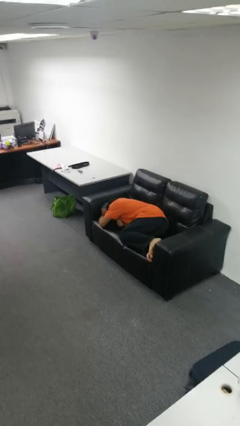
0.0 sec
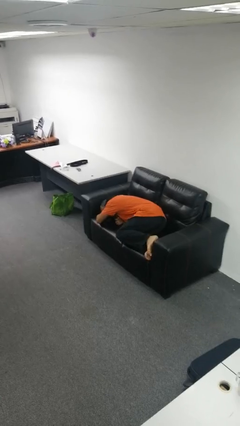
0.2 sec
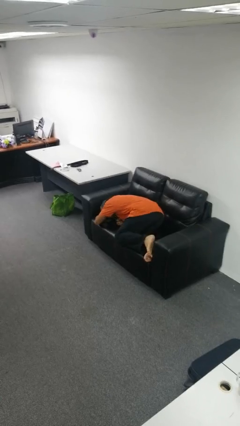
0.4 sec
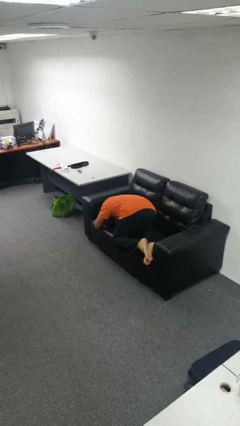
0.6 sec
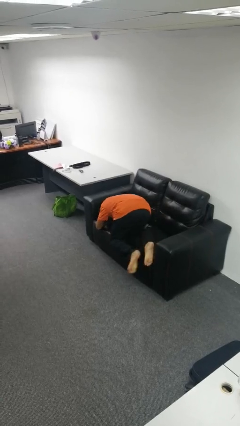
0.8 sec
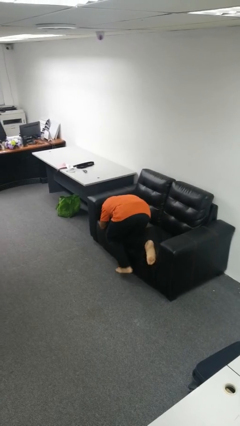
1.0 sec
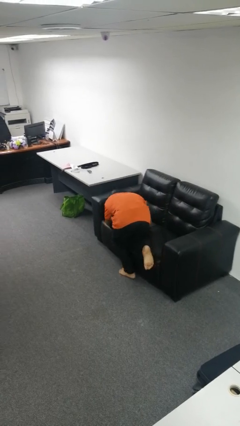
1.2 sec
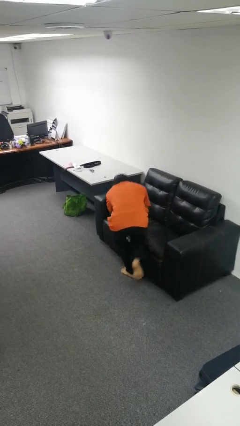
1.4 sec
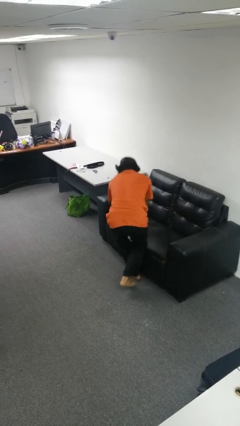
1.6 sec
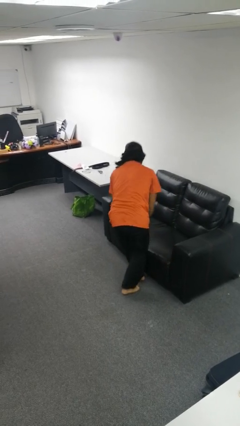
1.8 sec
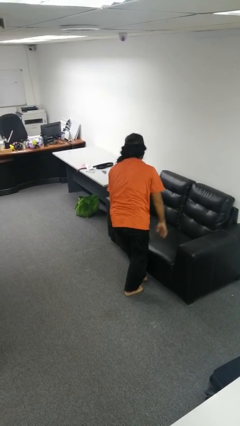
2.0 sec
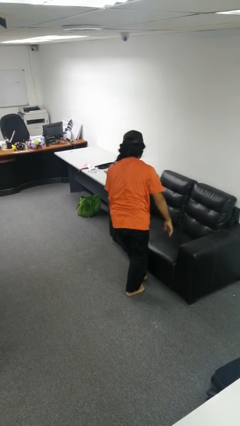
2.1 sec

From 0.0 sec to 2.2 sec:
person stands up

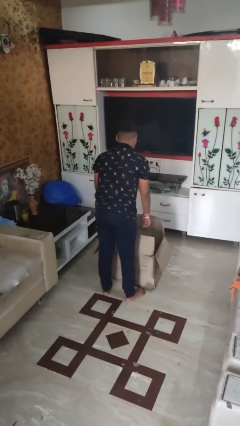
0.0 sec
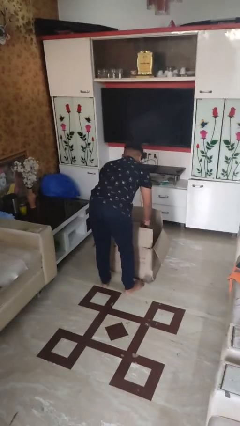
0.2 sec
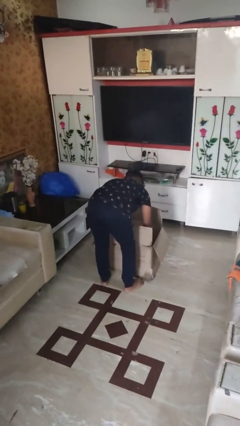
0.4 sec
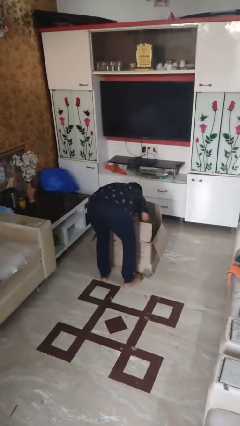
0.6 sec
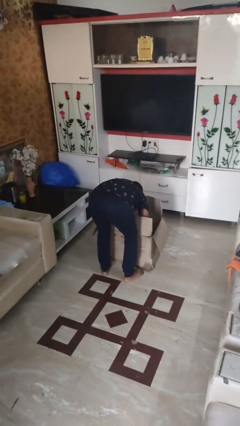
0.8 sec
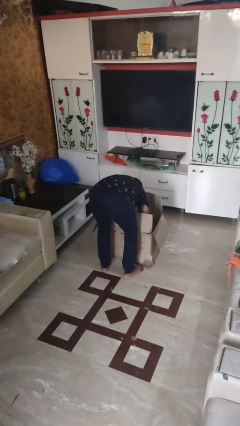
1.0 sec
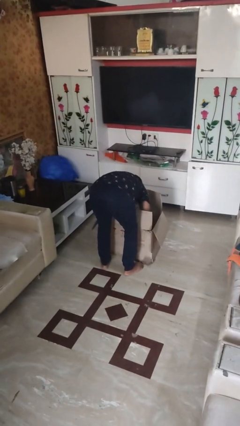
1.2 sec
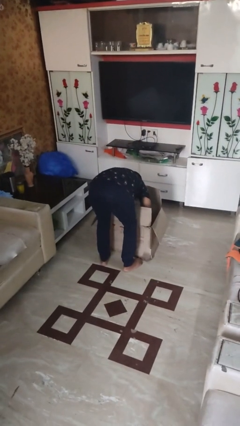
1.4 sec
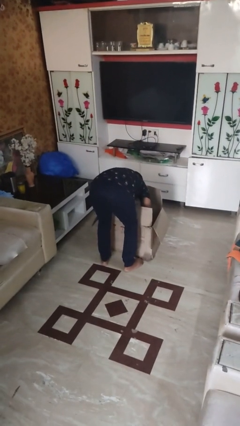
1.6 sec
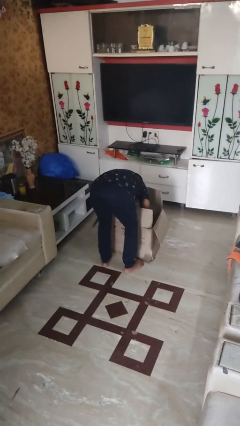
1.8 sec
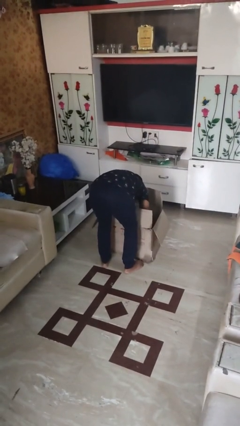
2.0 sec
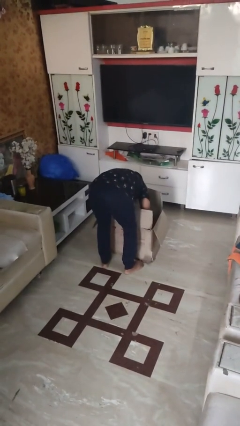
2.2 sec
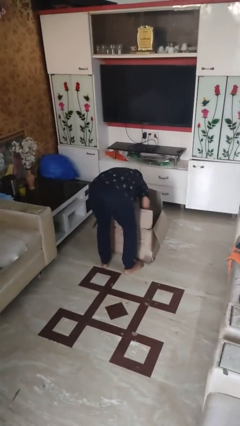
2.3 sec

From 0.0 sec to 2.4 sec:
person searches in box

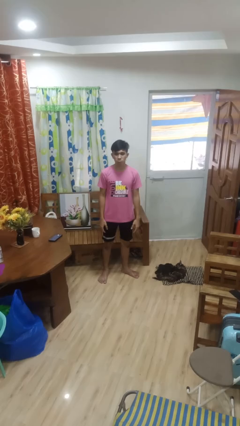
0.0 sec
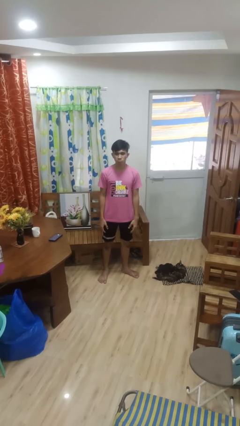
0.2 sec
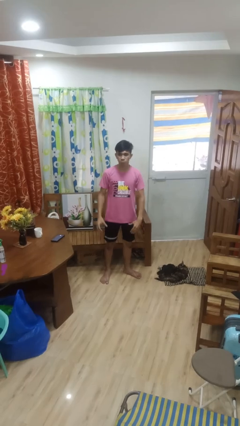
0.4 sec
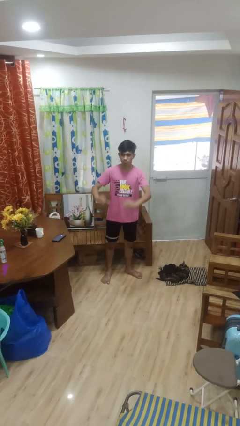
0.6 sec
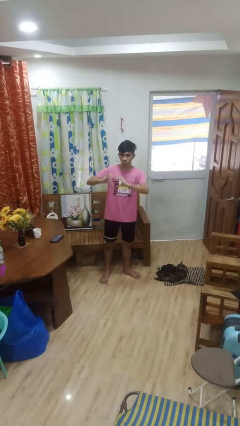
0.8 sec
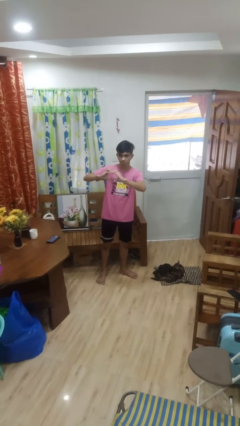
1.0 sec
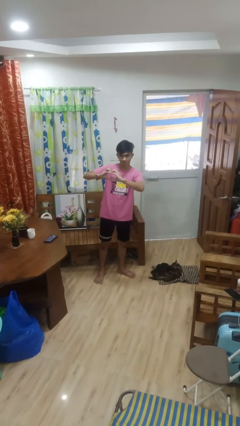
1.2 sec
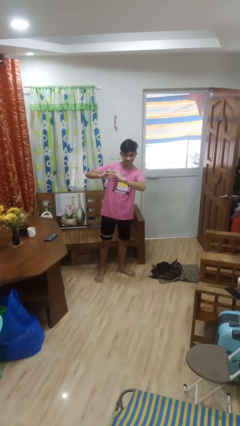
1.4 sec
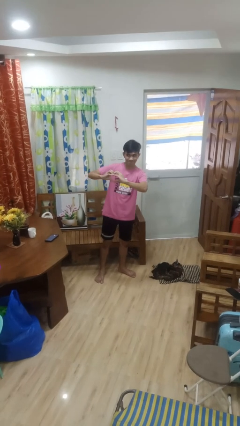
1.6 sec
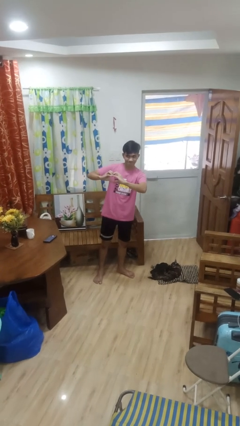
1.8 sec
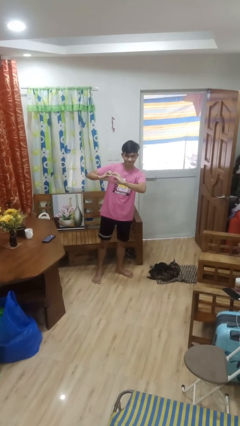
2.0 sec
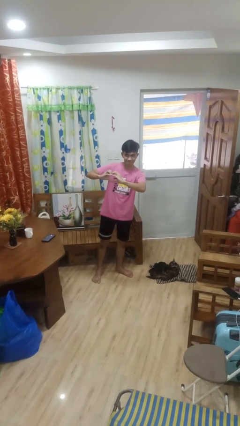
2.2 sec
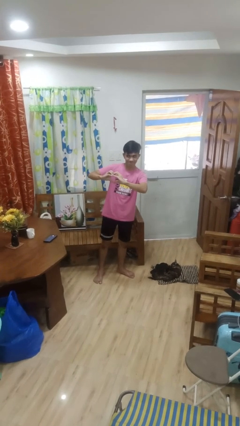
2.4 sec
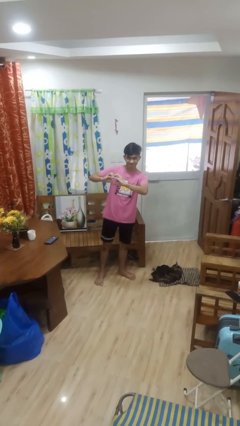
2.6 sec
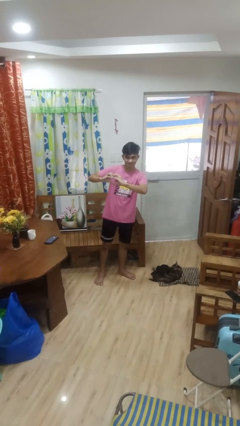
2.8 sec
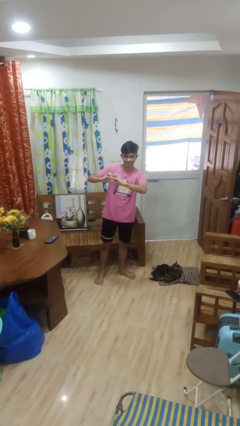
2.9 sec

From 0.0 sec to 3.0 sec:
person gestures heart

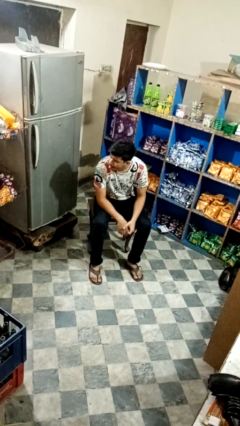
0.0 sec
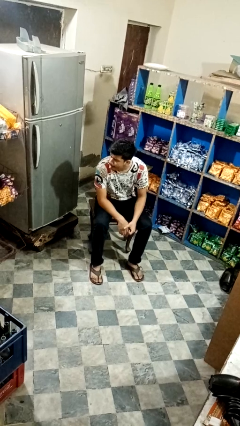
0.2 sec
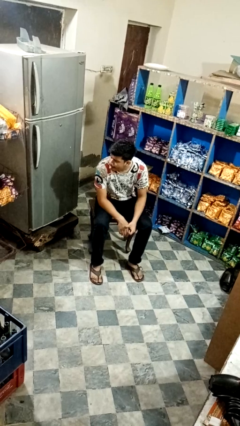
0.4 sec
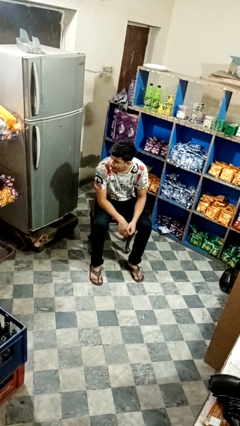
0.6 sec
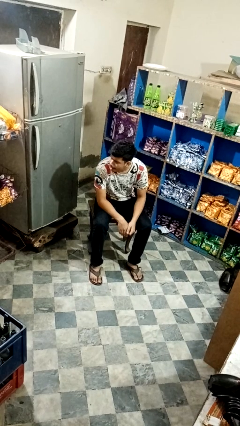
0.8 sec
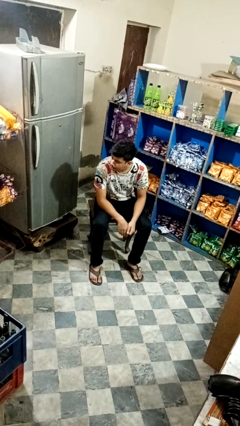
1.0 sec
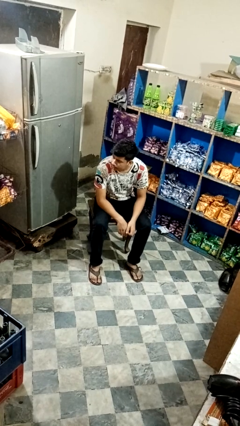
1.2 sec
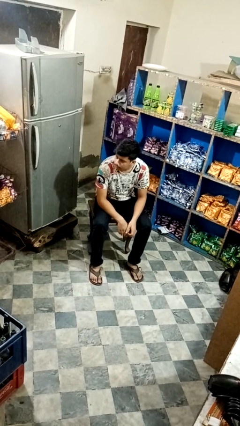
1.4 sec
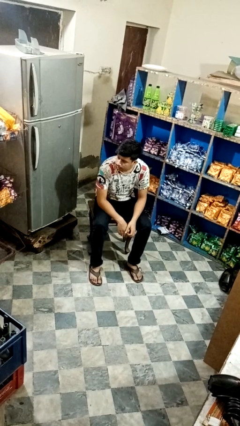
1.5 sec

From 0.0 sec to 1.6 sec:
person sticks out tongue

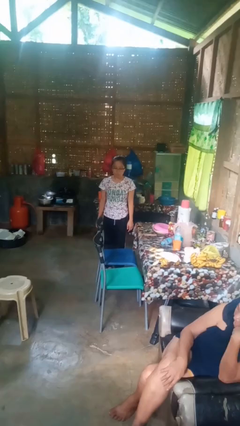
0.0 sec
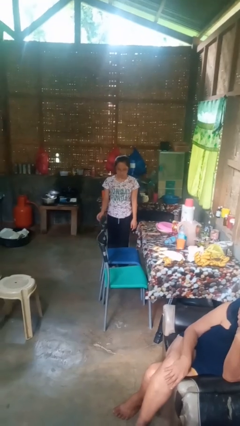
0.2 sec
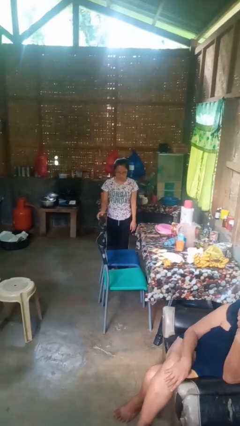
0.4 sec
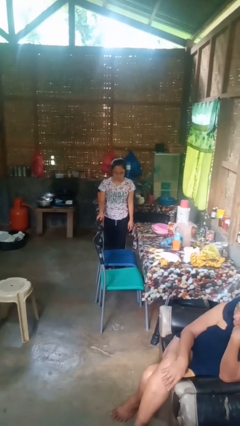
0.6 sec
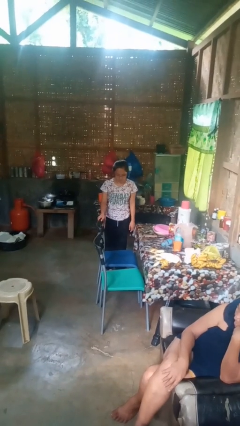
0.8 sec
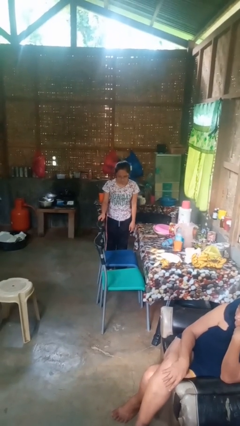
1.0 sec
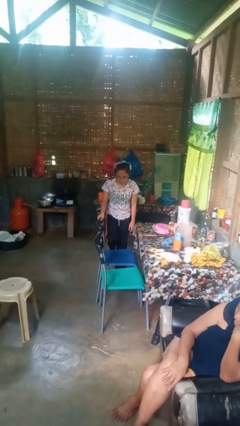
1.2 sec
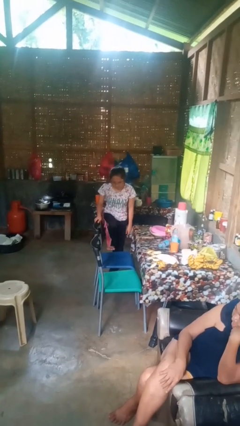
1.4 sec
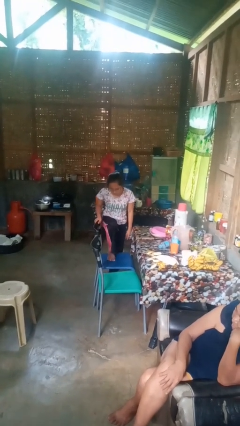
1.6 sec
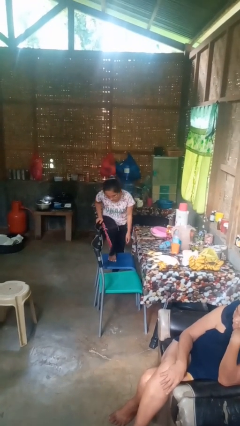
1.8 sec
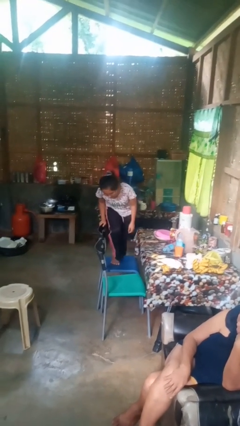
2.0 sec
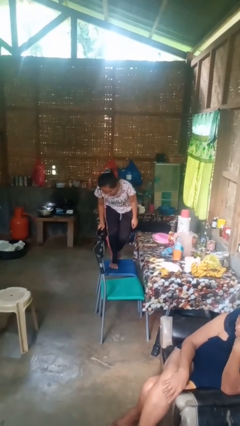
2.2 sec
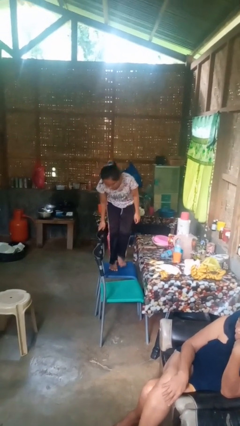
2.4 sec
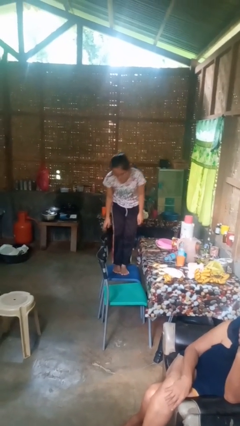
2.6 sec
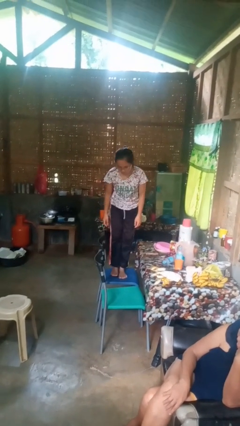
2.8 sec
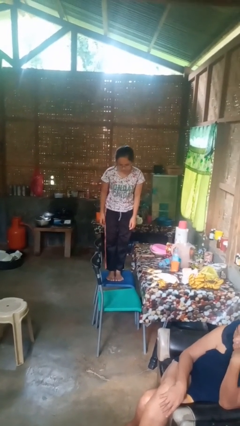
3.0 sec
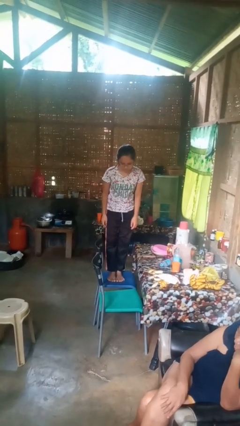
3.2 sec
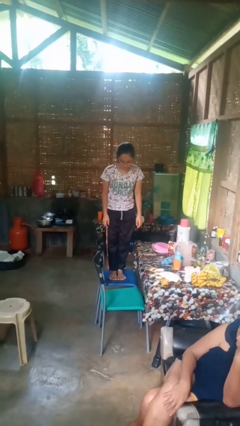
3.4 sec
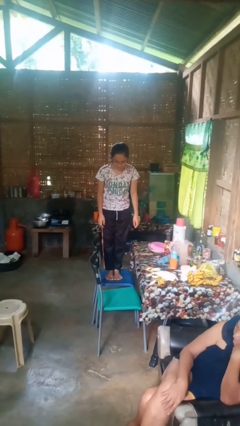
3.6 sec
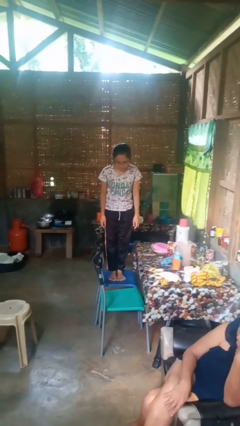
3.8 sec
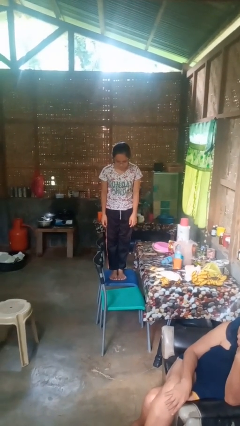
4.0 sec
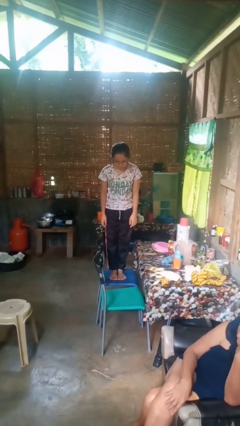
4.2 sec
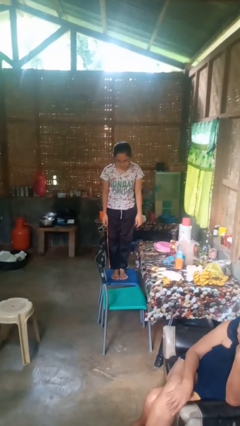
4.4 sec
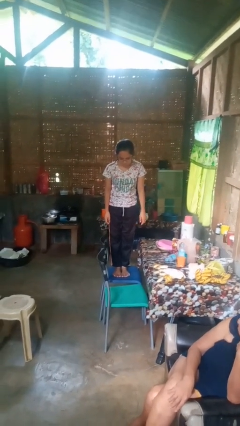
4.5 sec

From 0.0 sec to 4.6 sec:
person climbs on chair

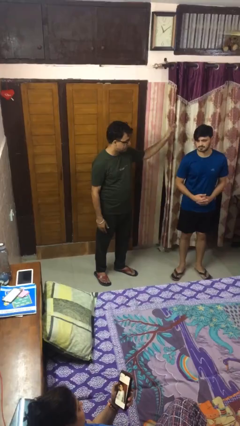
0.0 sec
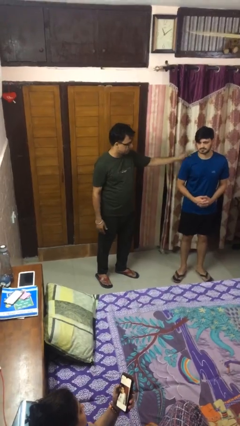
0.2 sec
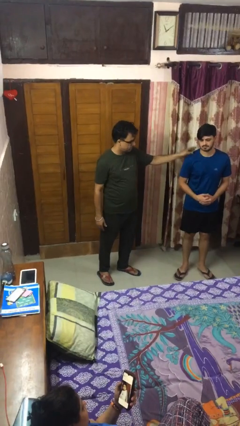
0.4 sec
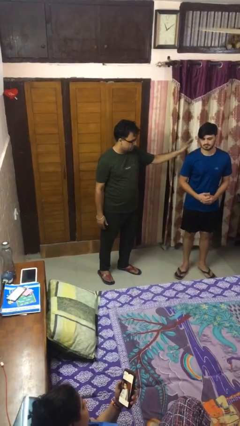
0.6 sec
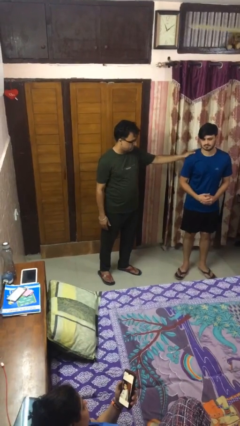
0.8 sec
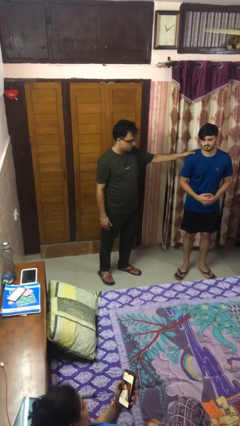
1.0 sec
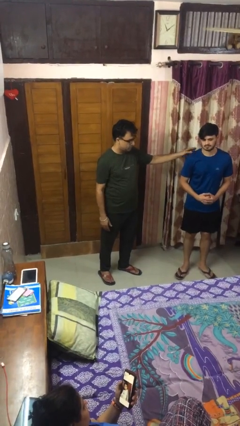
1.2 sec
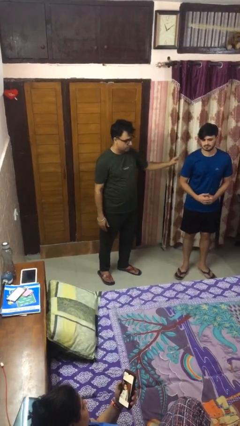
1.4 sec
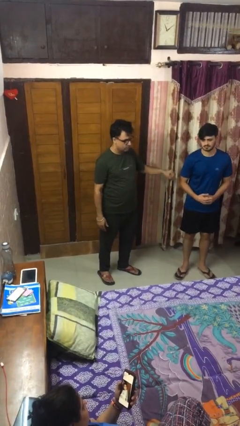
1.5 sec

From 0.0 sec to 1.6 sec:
person pounds shoulders of person

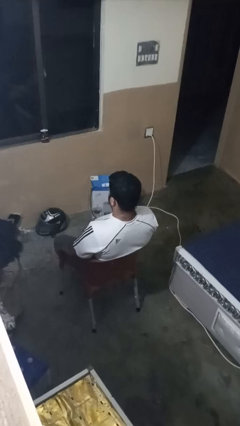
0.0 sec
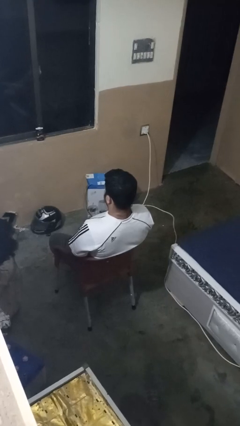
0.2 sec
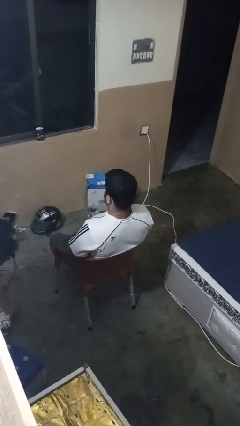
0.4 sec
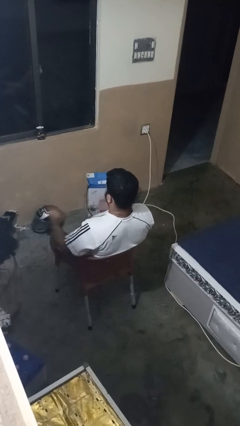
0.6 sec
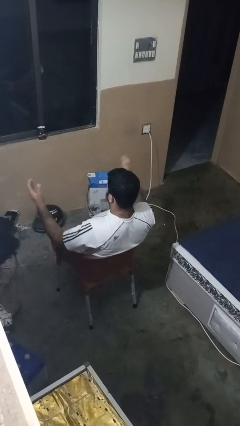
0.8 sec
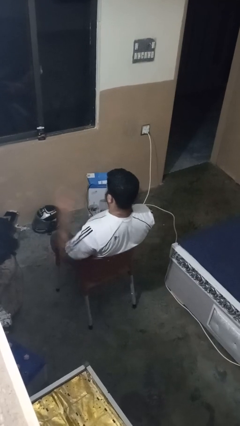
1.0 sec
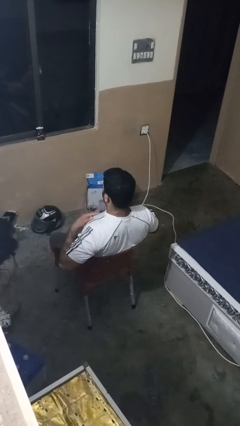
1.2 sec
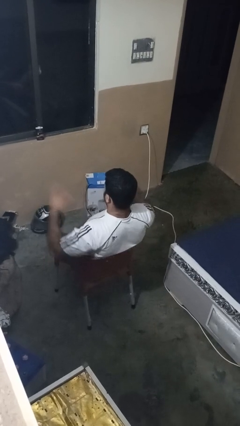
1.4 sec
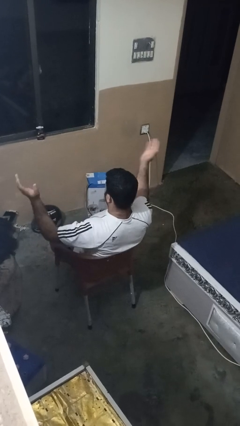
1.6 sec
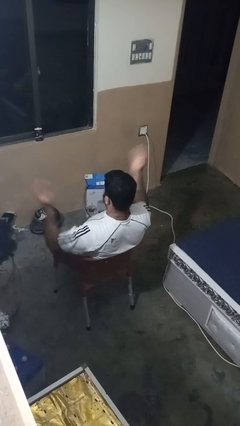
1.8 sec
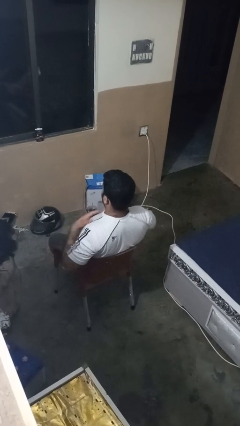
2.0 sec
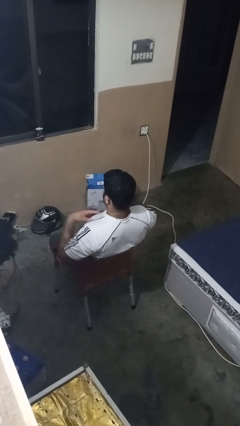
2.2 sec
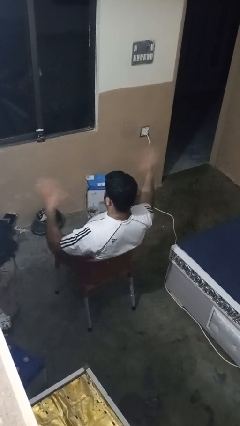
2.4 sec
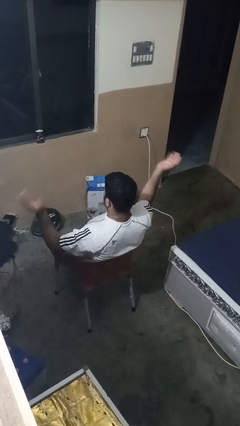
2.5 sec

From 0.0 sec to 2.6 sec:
person drums on chest
